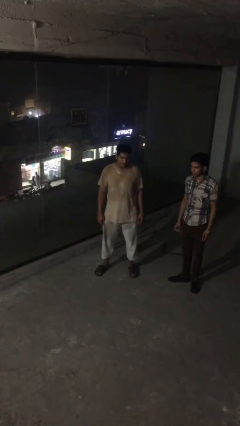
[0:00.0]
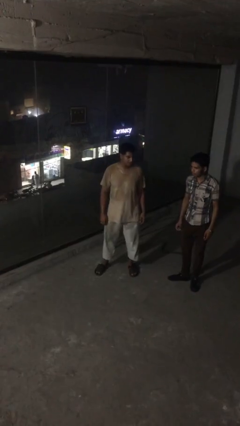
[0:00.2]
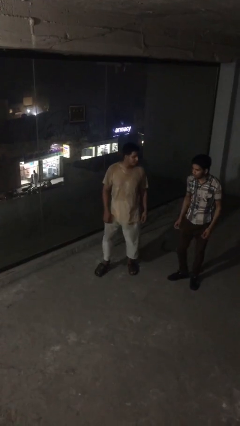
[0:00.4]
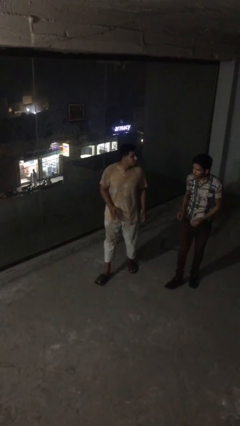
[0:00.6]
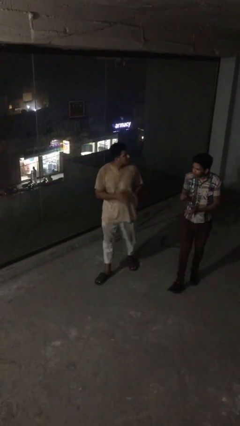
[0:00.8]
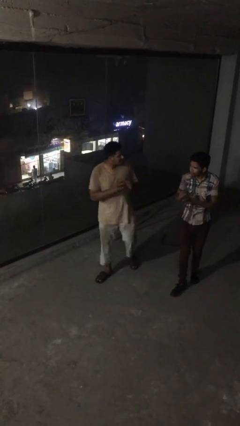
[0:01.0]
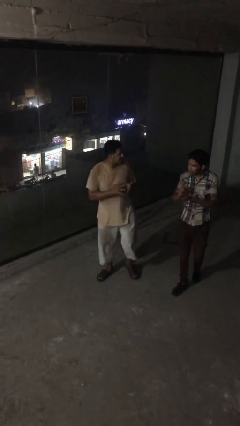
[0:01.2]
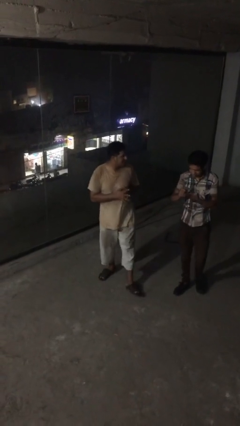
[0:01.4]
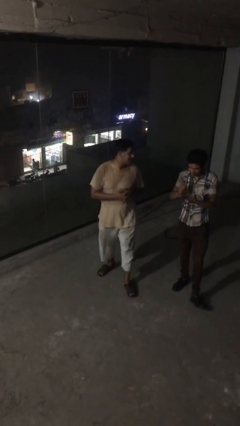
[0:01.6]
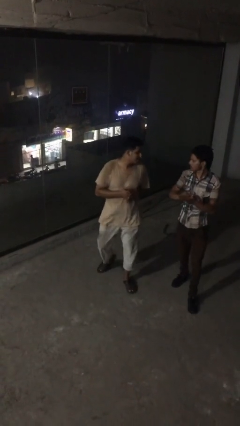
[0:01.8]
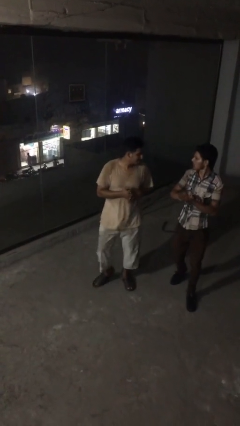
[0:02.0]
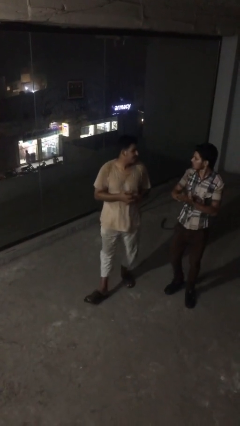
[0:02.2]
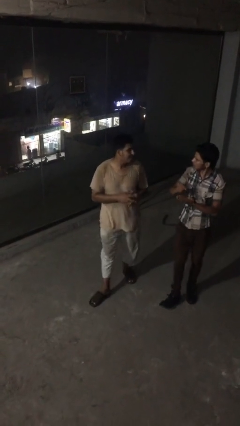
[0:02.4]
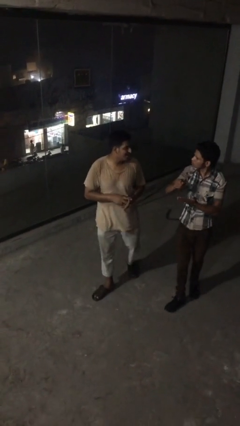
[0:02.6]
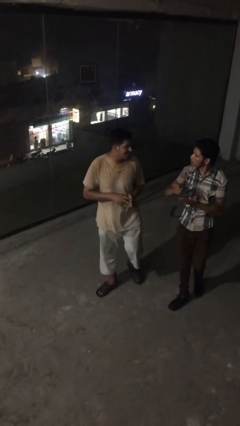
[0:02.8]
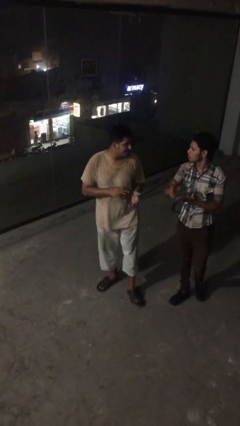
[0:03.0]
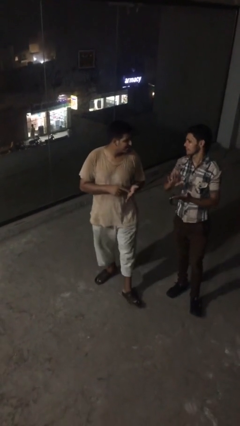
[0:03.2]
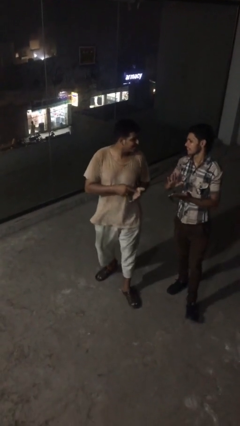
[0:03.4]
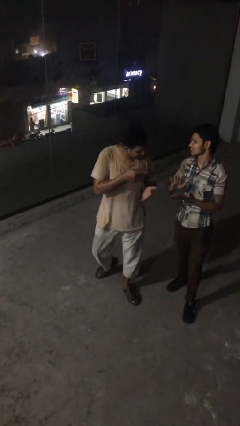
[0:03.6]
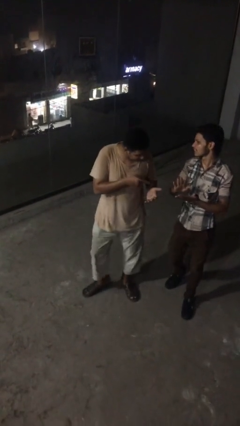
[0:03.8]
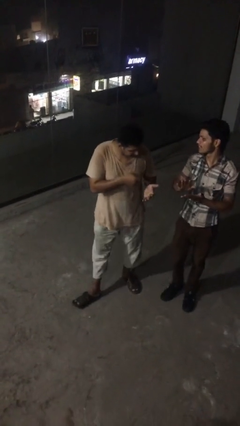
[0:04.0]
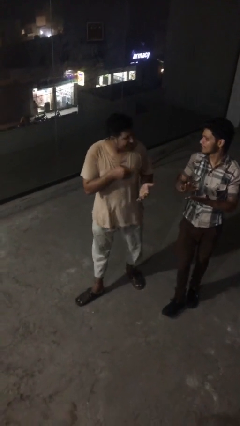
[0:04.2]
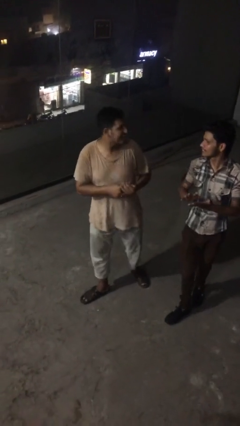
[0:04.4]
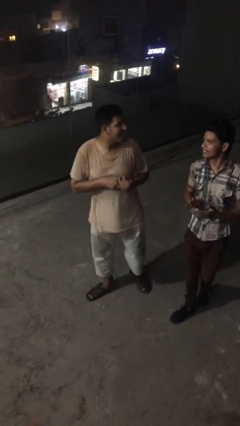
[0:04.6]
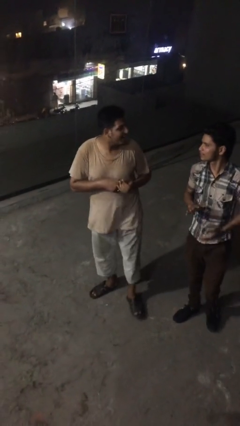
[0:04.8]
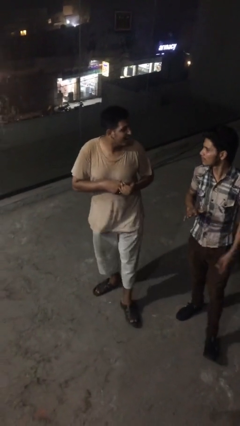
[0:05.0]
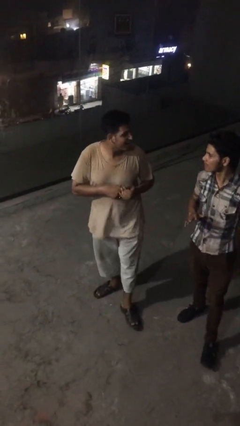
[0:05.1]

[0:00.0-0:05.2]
person talks to person

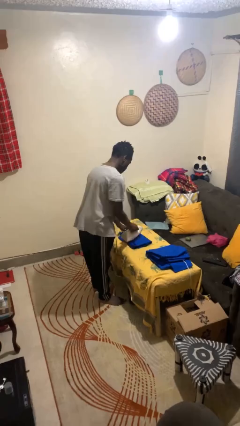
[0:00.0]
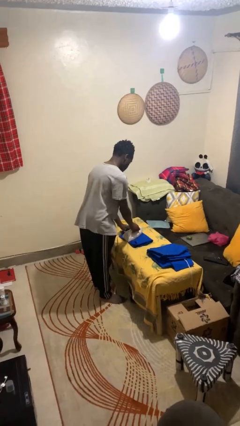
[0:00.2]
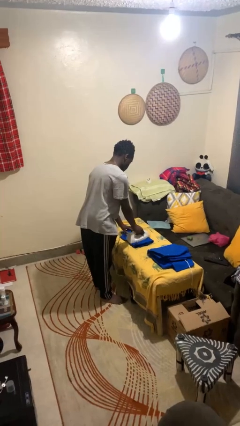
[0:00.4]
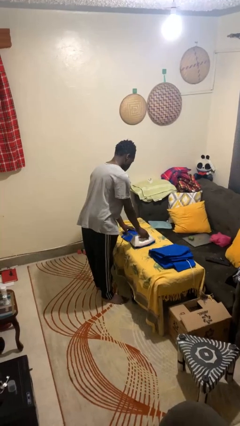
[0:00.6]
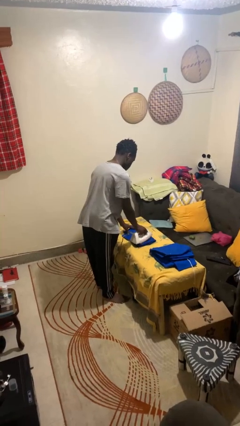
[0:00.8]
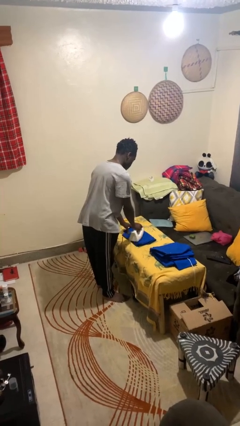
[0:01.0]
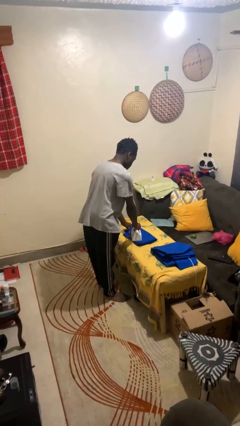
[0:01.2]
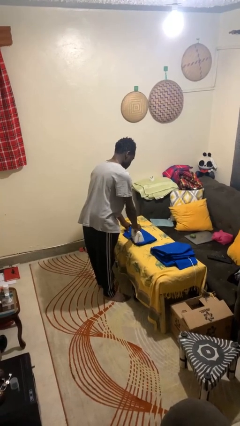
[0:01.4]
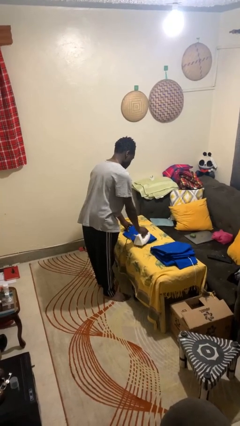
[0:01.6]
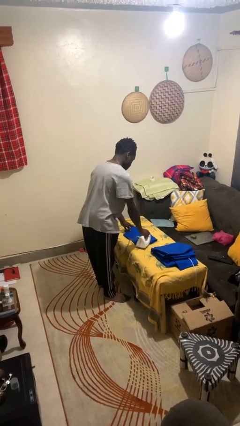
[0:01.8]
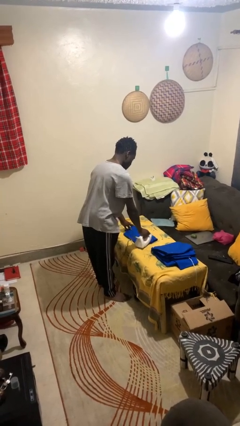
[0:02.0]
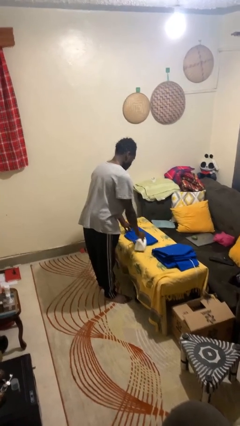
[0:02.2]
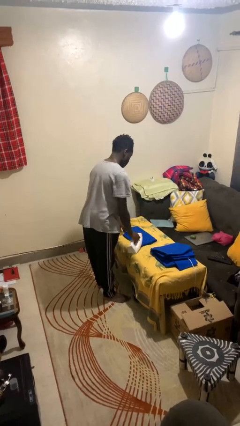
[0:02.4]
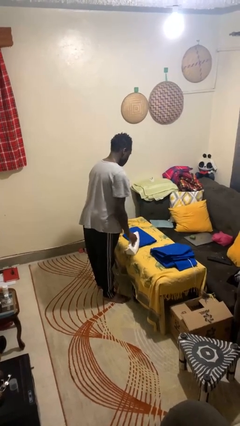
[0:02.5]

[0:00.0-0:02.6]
person irons clothes

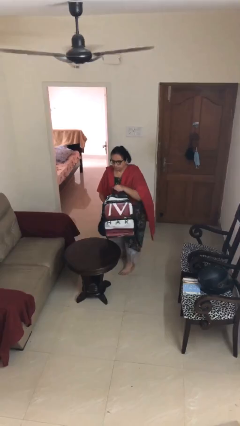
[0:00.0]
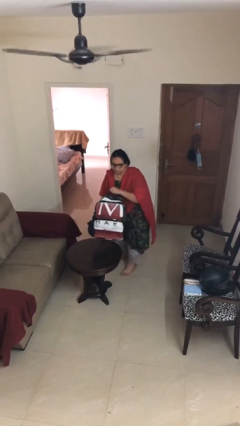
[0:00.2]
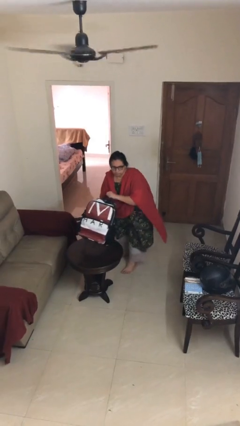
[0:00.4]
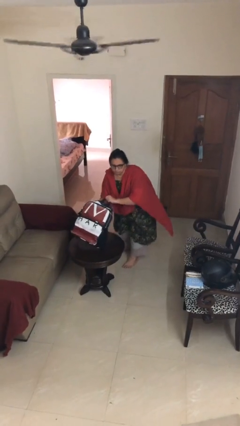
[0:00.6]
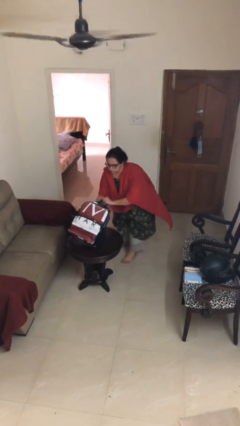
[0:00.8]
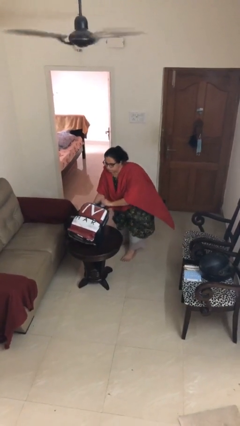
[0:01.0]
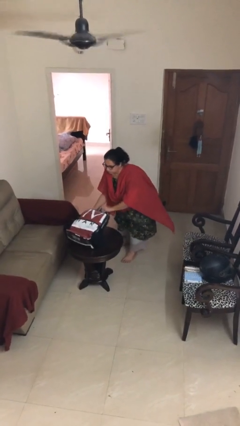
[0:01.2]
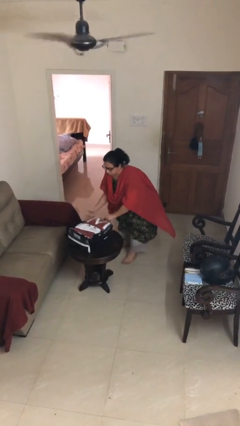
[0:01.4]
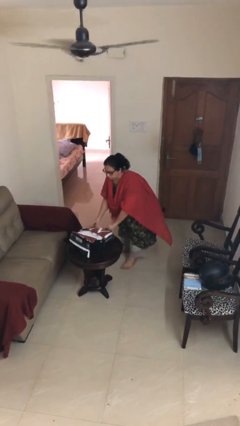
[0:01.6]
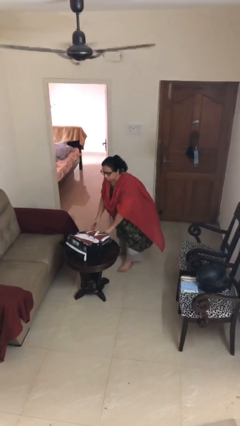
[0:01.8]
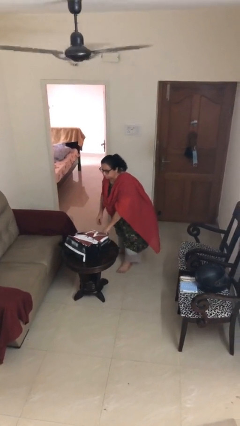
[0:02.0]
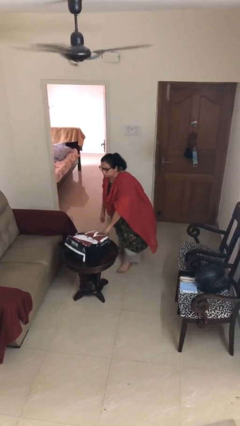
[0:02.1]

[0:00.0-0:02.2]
person puts down object on table

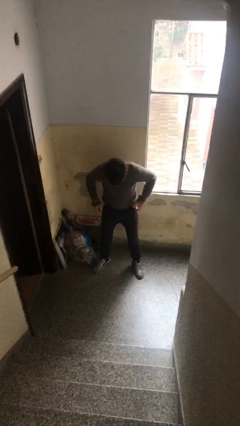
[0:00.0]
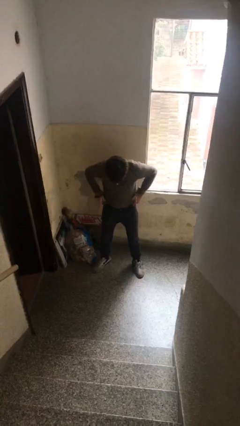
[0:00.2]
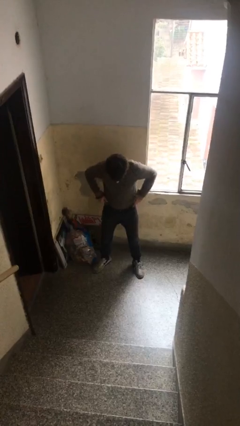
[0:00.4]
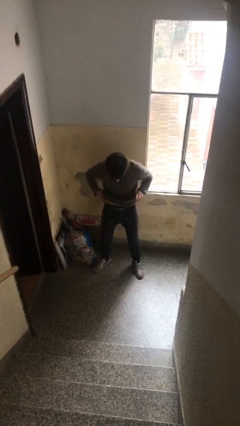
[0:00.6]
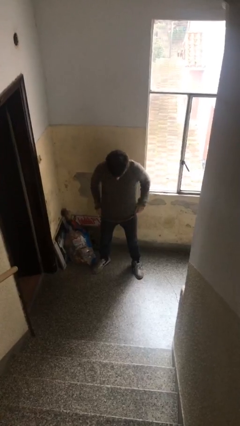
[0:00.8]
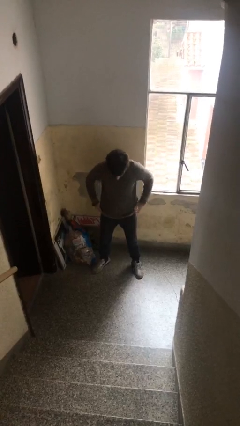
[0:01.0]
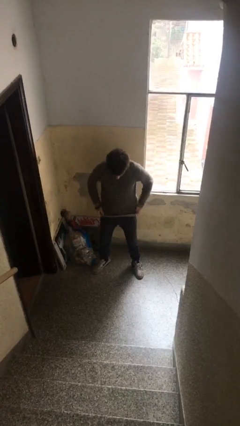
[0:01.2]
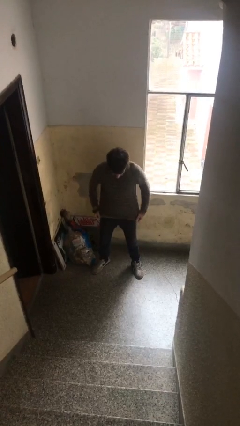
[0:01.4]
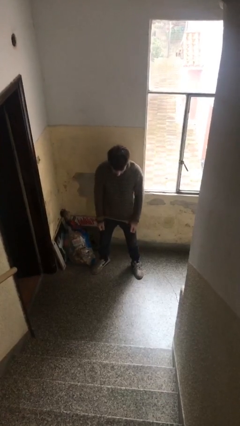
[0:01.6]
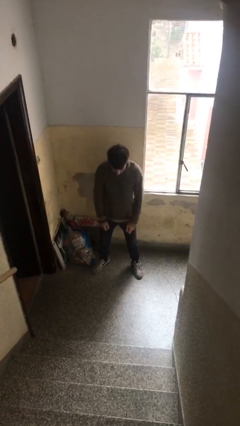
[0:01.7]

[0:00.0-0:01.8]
person untucks shirt

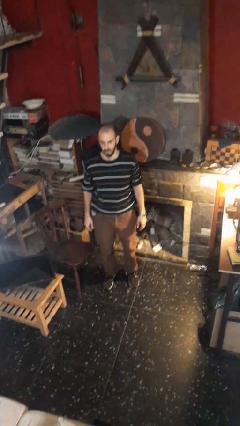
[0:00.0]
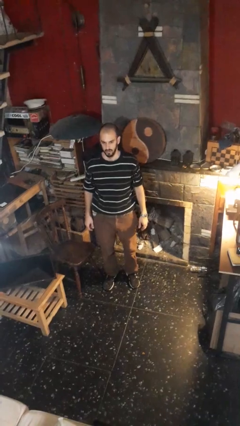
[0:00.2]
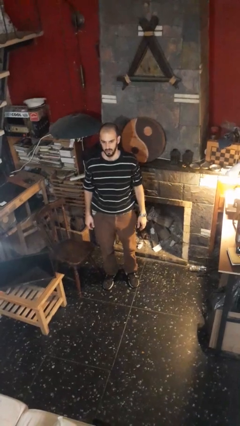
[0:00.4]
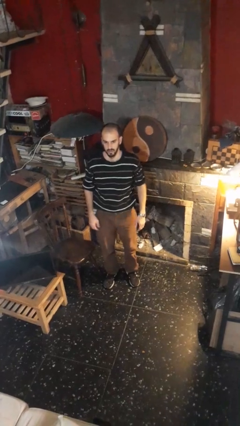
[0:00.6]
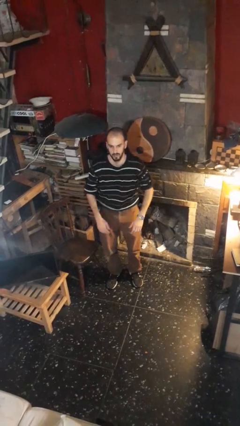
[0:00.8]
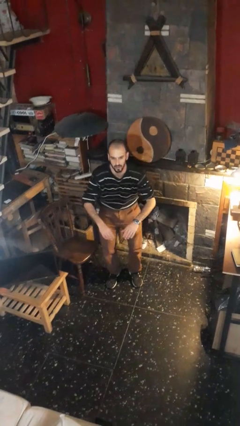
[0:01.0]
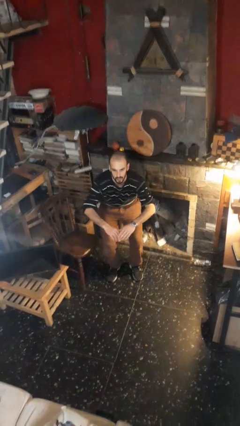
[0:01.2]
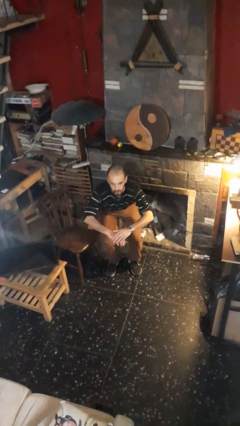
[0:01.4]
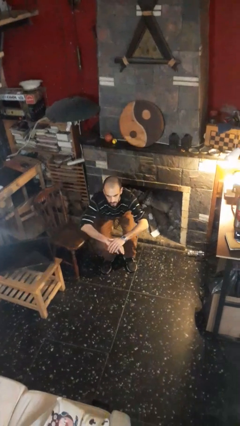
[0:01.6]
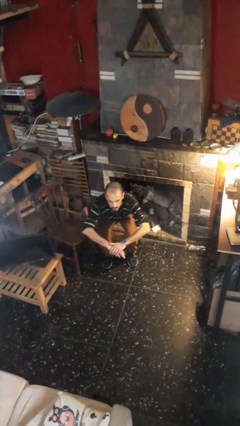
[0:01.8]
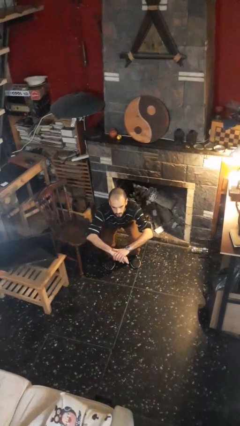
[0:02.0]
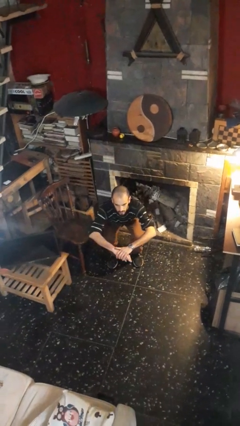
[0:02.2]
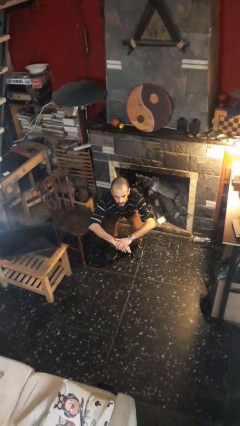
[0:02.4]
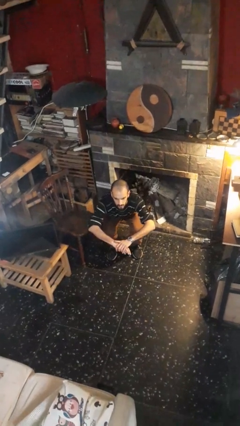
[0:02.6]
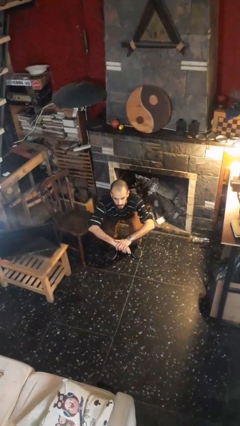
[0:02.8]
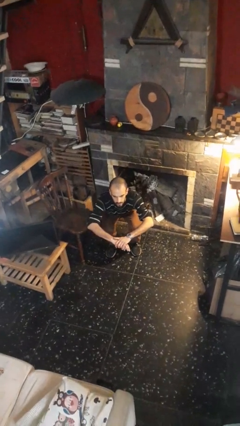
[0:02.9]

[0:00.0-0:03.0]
person squats

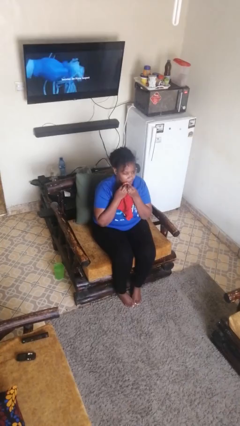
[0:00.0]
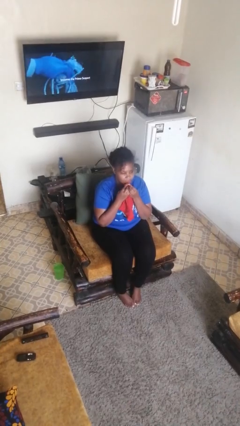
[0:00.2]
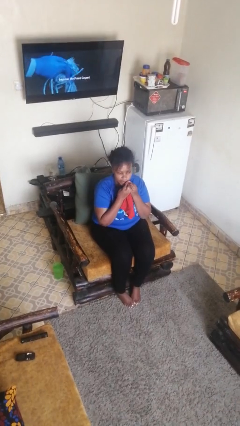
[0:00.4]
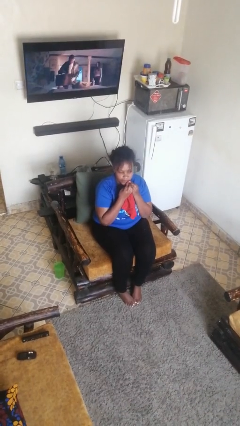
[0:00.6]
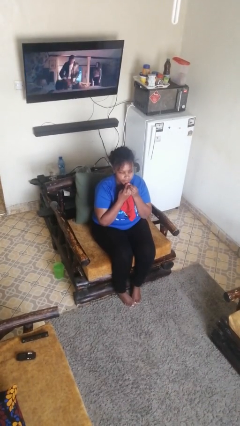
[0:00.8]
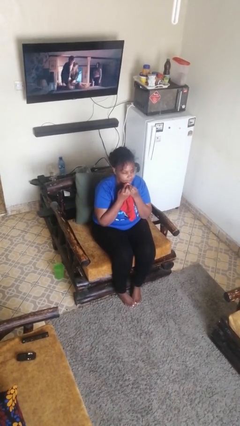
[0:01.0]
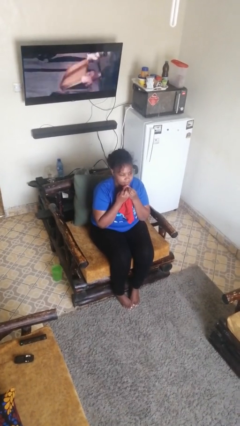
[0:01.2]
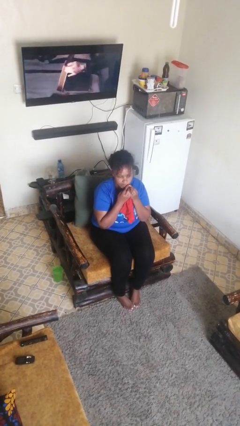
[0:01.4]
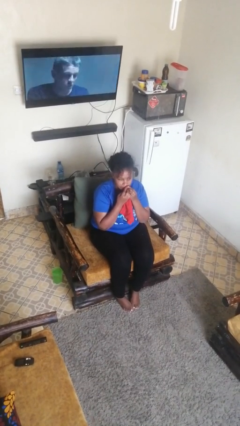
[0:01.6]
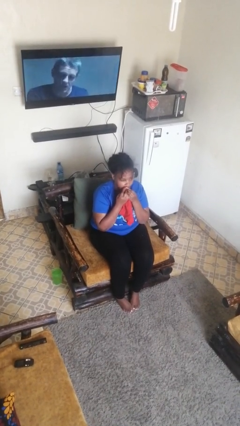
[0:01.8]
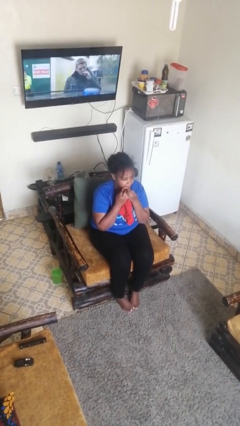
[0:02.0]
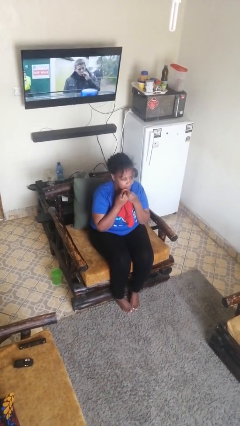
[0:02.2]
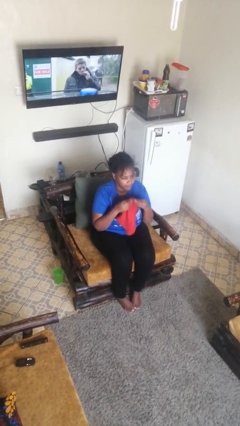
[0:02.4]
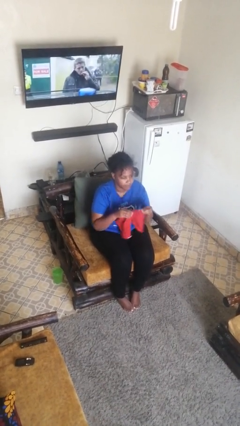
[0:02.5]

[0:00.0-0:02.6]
person wipes mouth with napkin

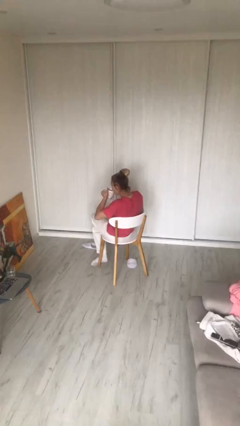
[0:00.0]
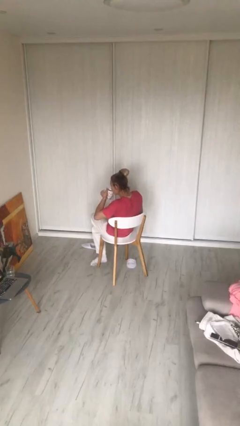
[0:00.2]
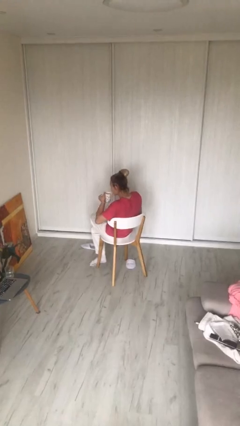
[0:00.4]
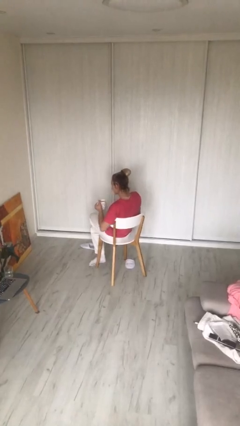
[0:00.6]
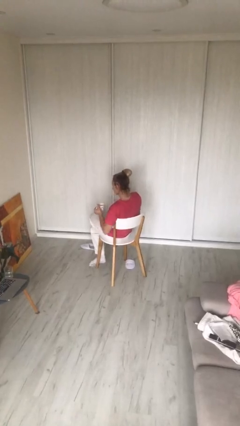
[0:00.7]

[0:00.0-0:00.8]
person drinks from mug
